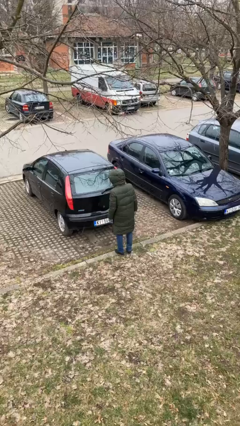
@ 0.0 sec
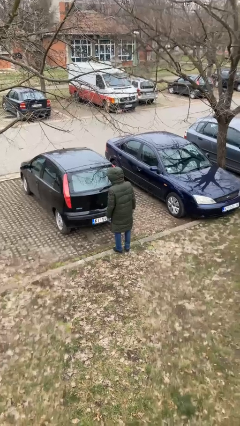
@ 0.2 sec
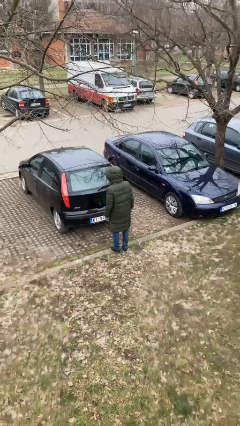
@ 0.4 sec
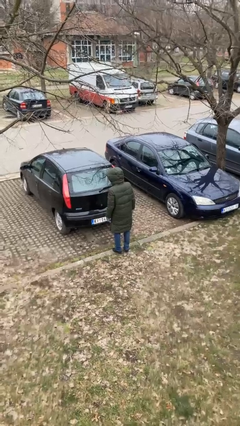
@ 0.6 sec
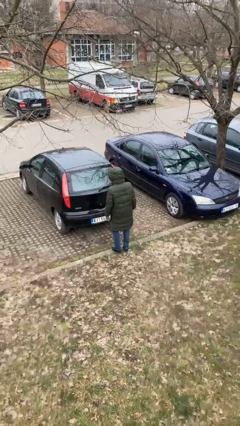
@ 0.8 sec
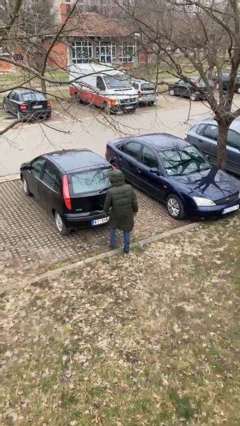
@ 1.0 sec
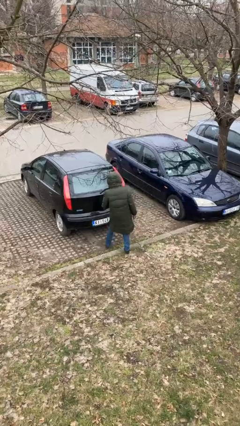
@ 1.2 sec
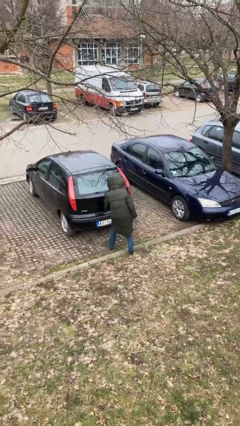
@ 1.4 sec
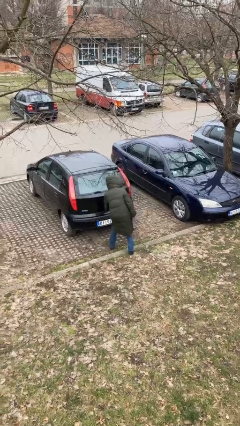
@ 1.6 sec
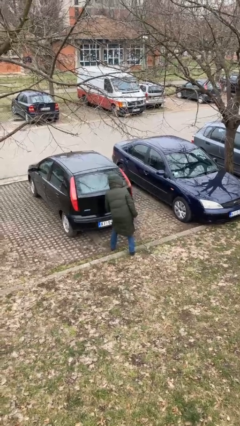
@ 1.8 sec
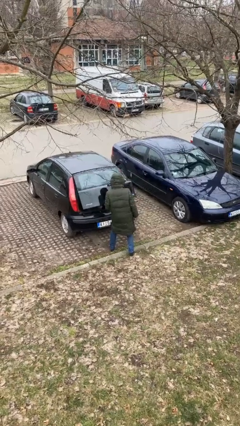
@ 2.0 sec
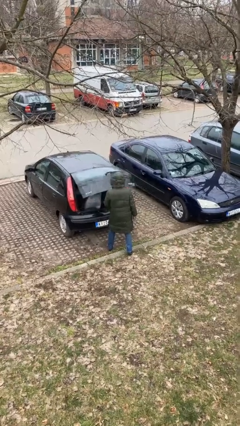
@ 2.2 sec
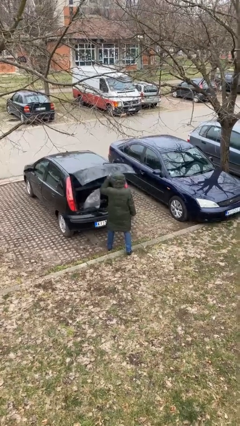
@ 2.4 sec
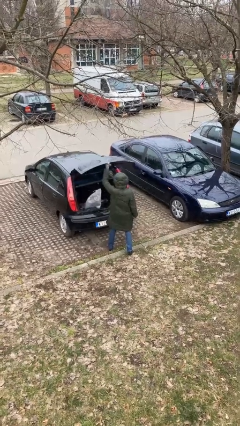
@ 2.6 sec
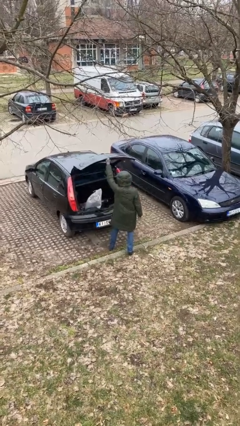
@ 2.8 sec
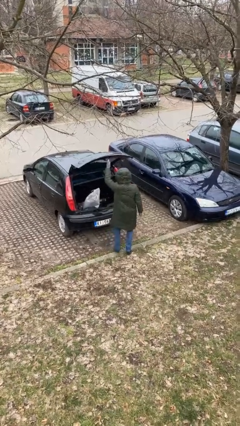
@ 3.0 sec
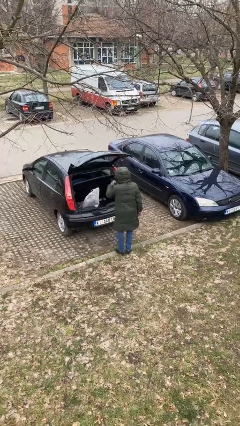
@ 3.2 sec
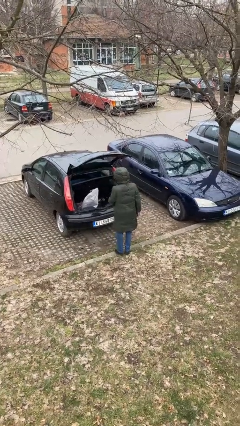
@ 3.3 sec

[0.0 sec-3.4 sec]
person opens car trunk

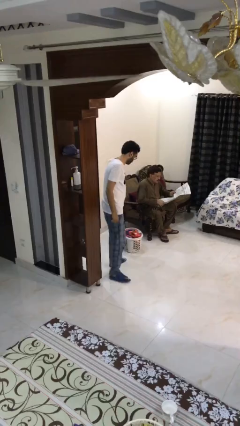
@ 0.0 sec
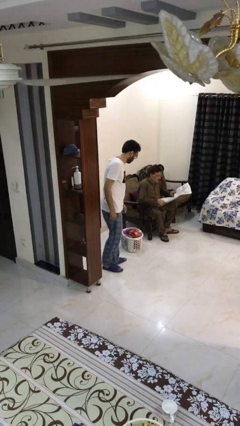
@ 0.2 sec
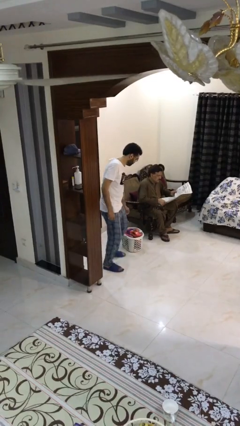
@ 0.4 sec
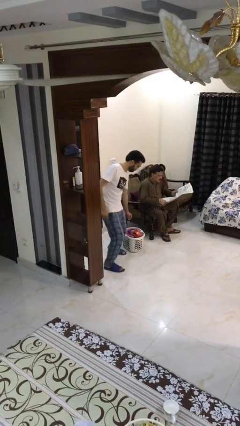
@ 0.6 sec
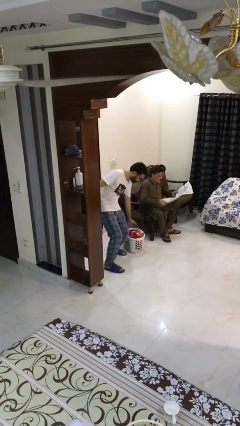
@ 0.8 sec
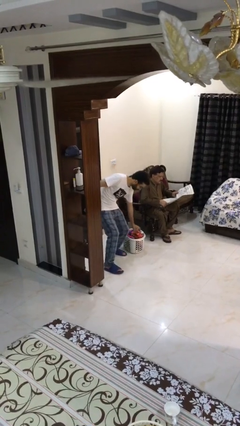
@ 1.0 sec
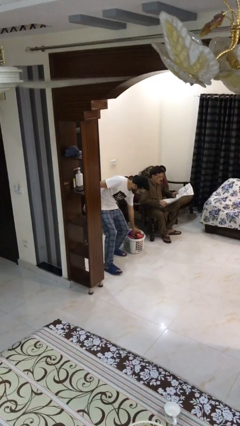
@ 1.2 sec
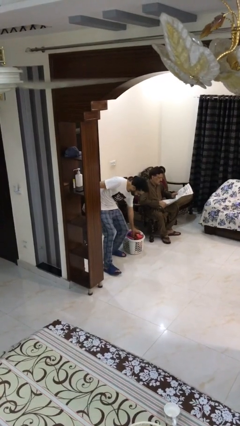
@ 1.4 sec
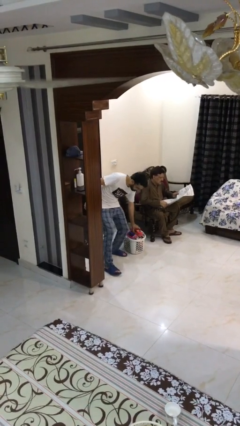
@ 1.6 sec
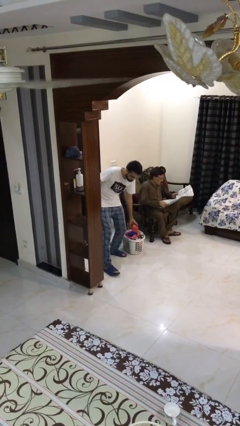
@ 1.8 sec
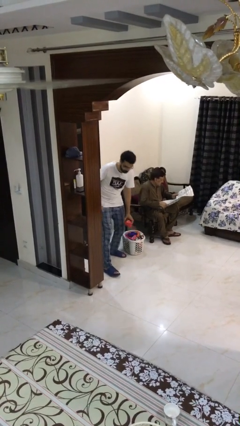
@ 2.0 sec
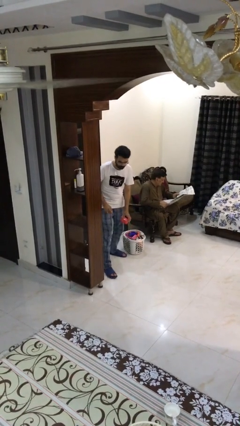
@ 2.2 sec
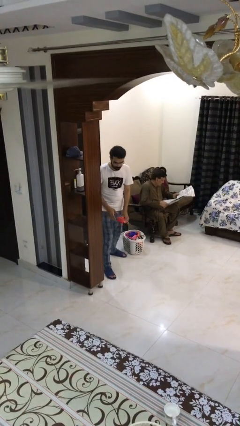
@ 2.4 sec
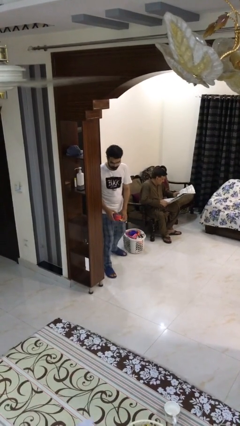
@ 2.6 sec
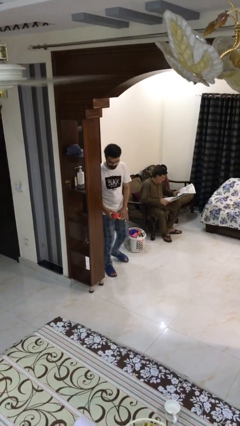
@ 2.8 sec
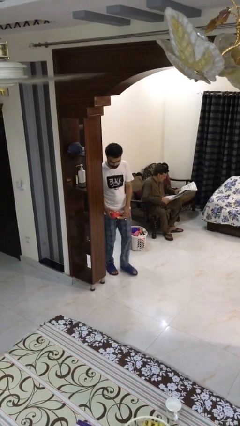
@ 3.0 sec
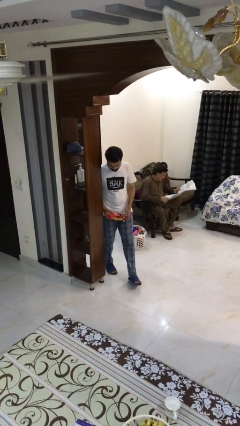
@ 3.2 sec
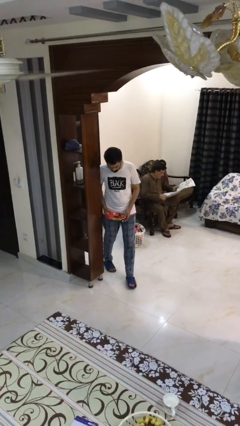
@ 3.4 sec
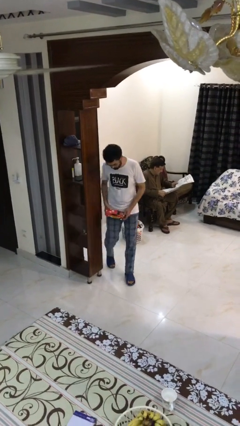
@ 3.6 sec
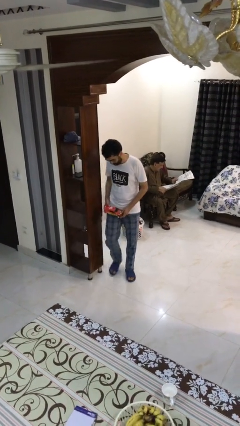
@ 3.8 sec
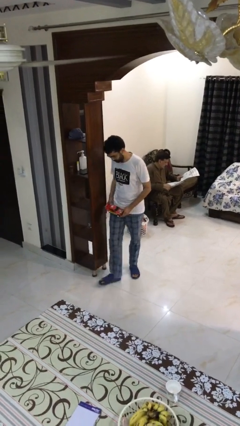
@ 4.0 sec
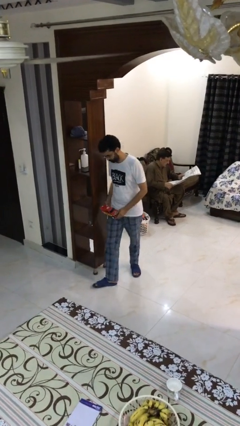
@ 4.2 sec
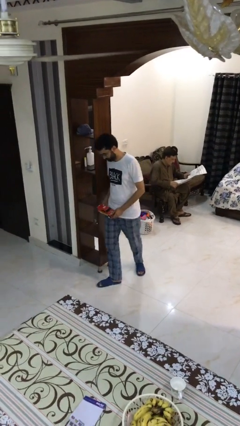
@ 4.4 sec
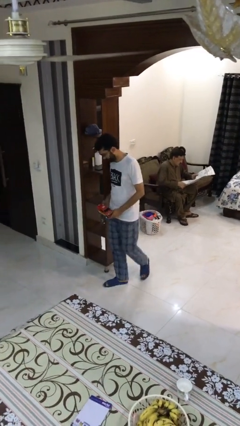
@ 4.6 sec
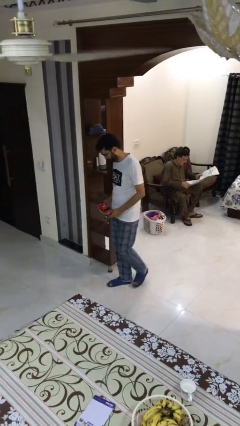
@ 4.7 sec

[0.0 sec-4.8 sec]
person steals object from person

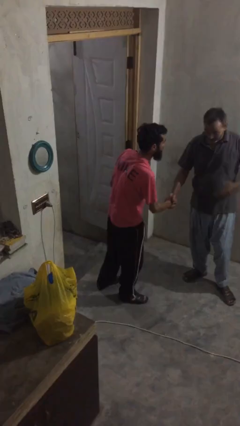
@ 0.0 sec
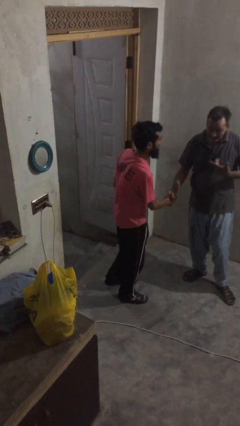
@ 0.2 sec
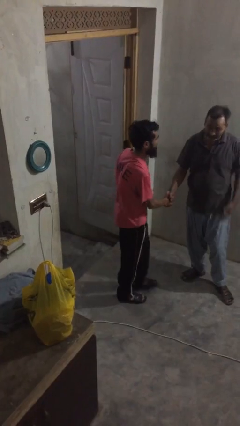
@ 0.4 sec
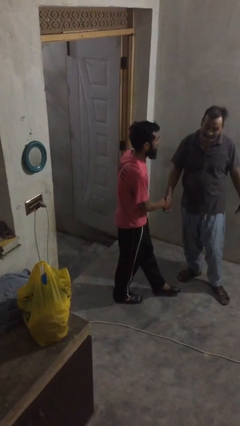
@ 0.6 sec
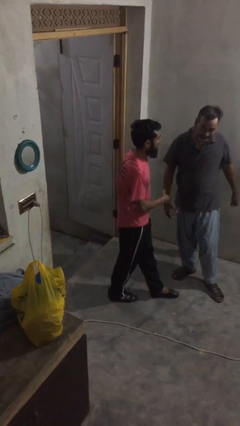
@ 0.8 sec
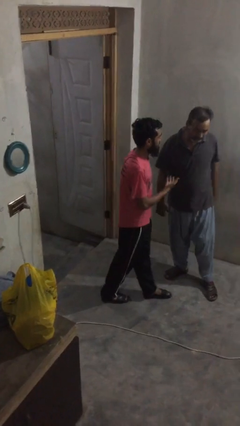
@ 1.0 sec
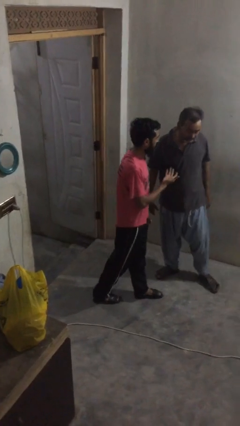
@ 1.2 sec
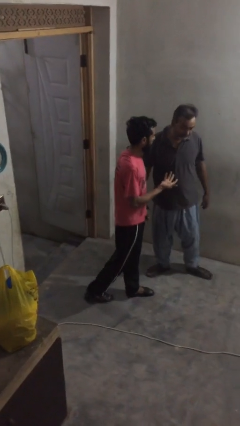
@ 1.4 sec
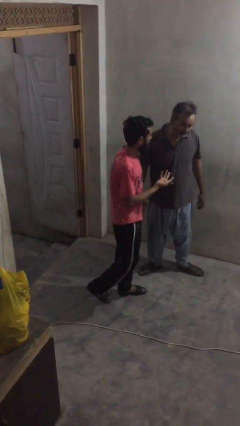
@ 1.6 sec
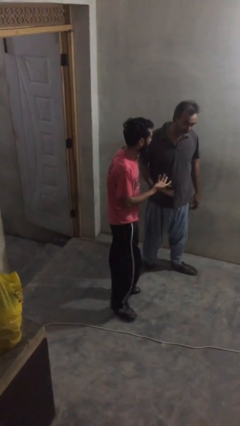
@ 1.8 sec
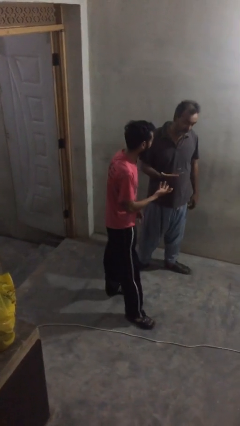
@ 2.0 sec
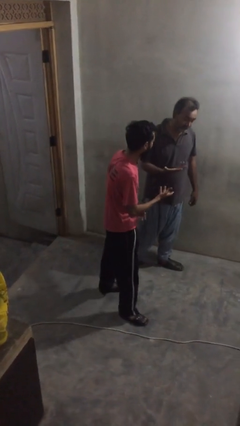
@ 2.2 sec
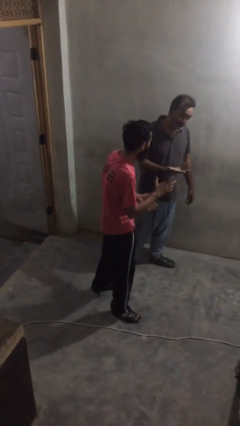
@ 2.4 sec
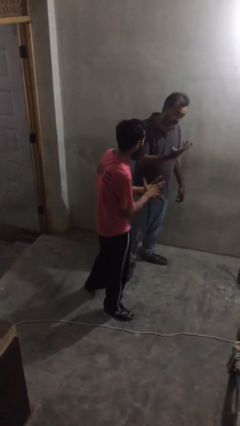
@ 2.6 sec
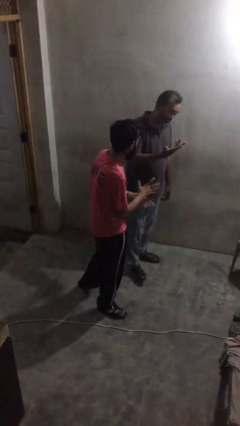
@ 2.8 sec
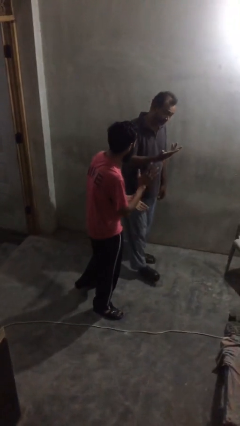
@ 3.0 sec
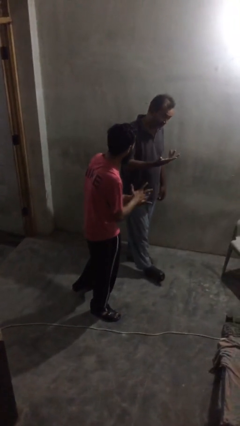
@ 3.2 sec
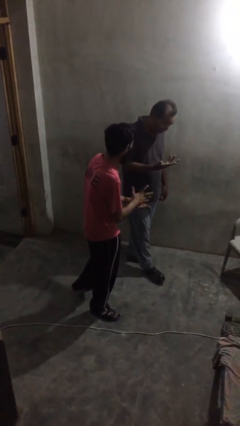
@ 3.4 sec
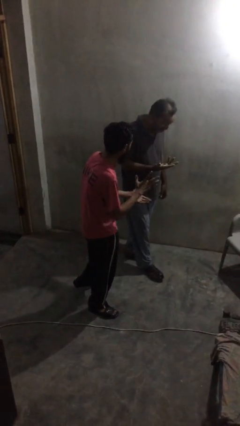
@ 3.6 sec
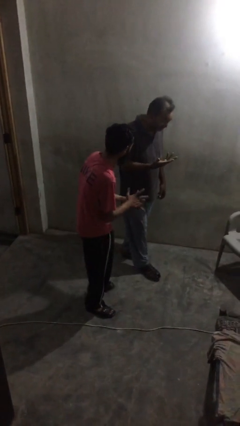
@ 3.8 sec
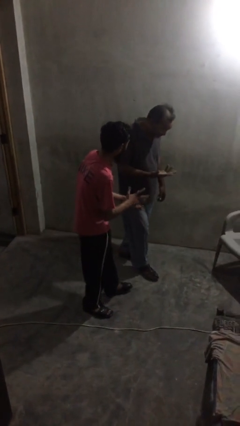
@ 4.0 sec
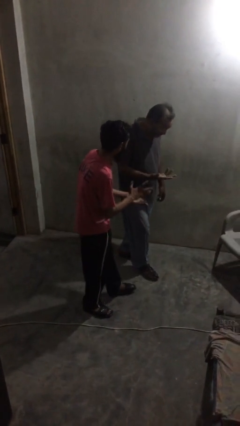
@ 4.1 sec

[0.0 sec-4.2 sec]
person talks to person

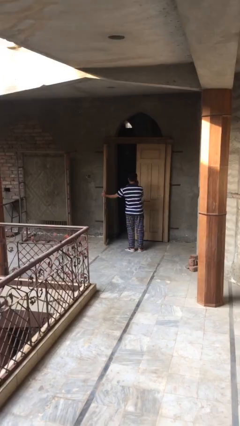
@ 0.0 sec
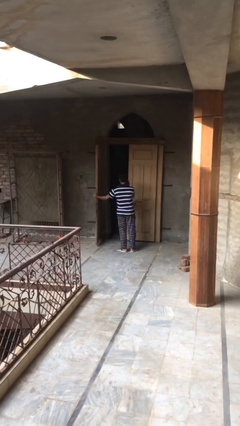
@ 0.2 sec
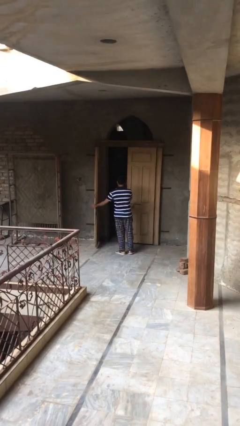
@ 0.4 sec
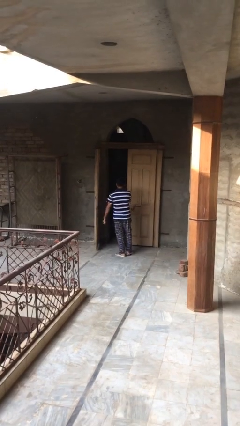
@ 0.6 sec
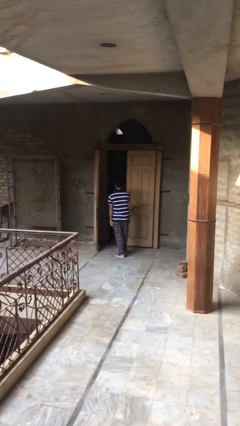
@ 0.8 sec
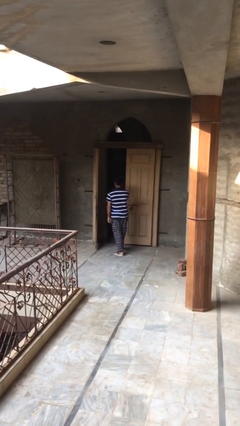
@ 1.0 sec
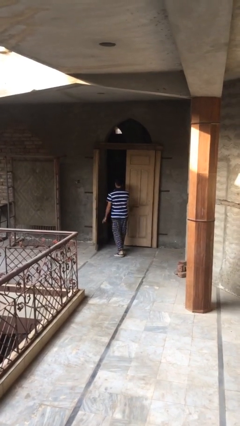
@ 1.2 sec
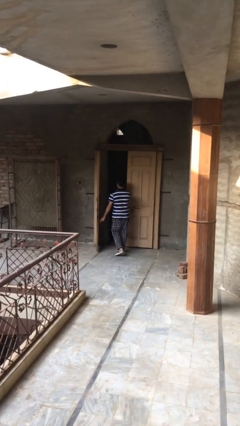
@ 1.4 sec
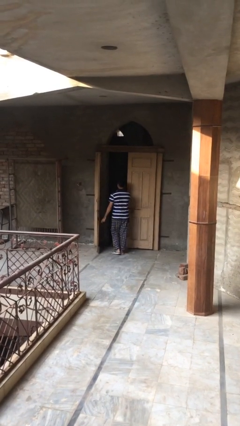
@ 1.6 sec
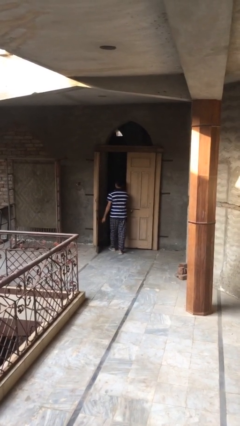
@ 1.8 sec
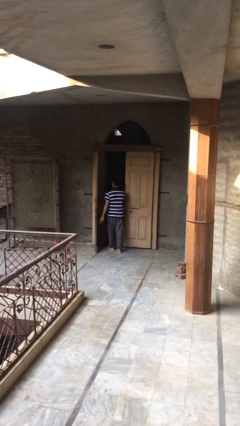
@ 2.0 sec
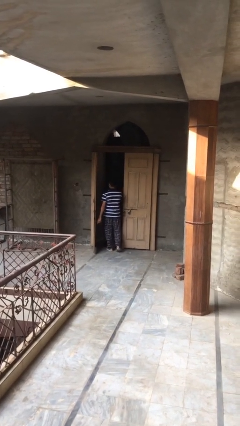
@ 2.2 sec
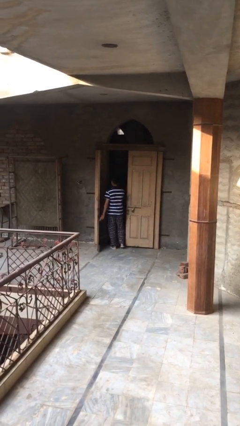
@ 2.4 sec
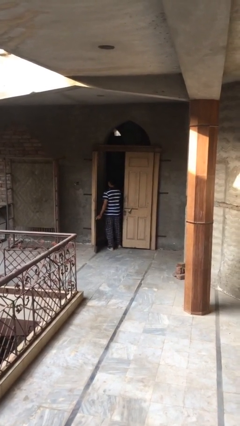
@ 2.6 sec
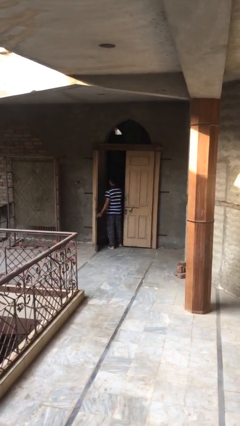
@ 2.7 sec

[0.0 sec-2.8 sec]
person exits scene through structure

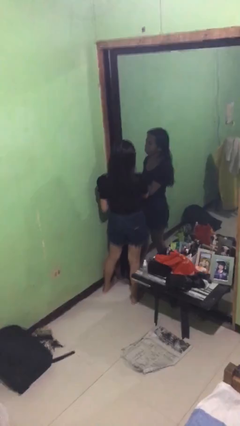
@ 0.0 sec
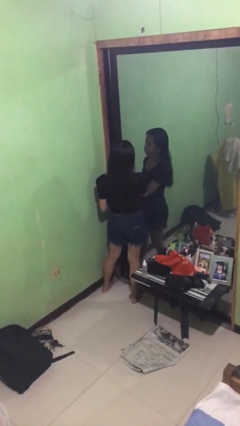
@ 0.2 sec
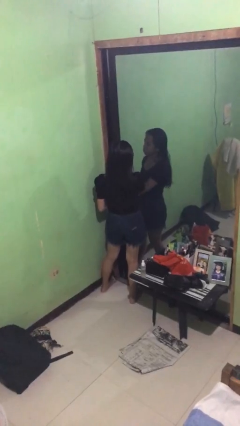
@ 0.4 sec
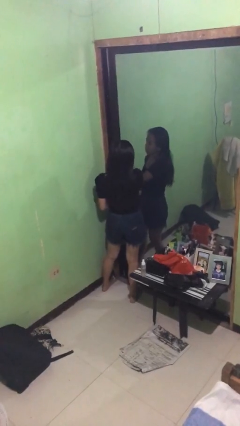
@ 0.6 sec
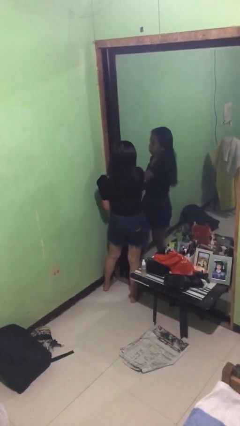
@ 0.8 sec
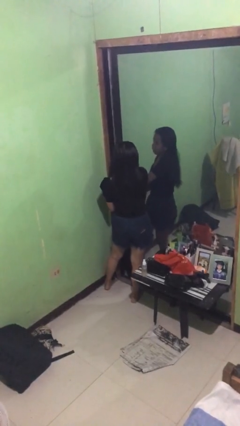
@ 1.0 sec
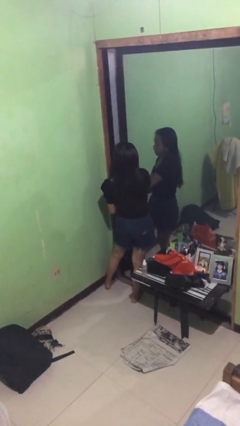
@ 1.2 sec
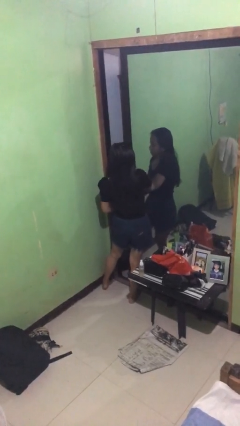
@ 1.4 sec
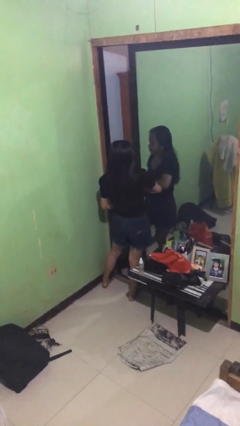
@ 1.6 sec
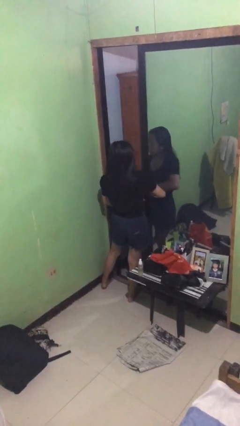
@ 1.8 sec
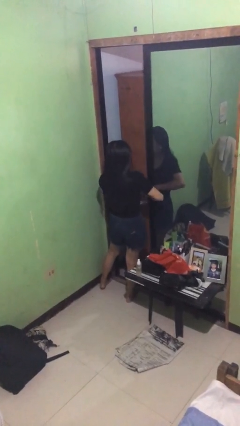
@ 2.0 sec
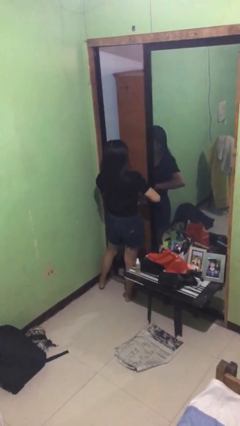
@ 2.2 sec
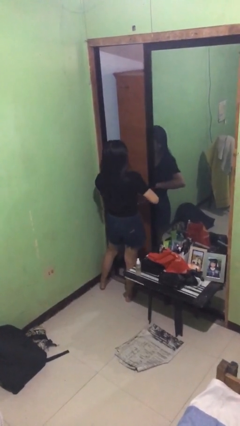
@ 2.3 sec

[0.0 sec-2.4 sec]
person opens sliding door
